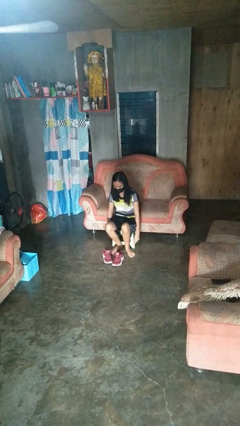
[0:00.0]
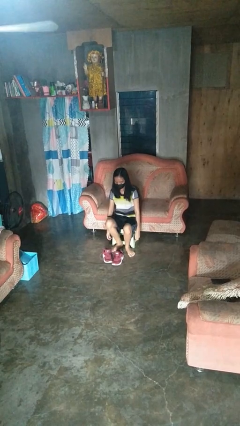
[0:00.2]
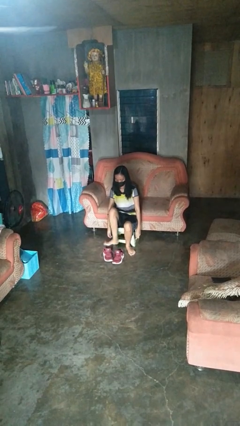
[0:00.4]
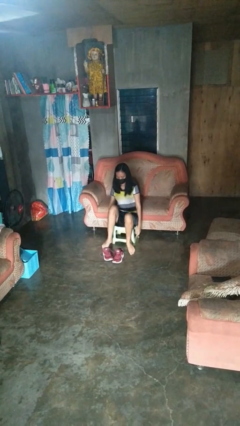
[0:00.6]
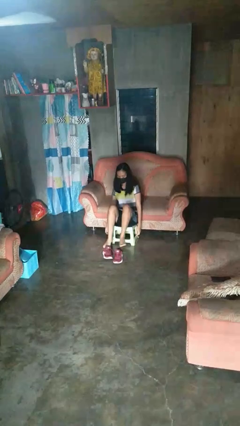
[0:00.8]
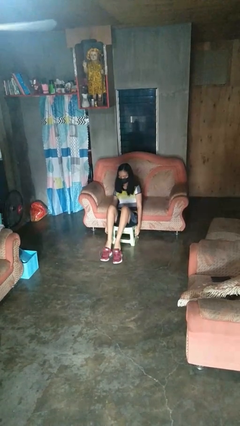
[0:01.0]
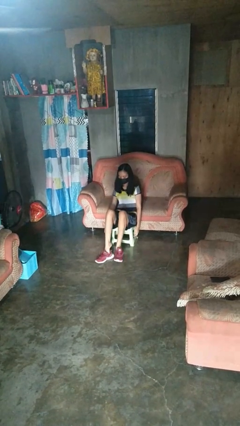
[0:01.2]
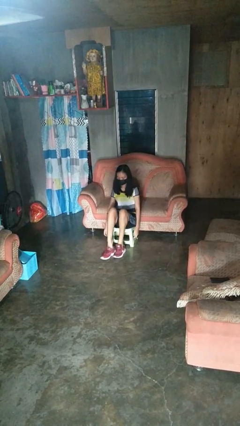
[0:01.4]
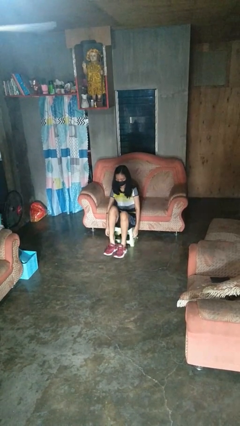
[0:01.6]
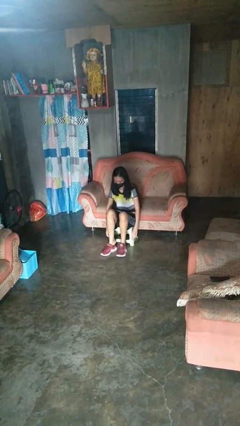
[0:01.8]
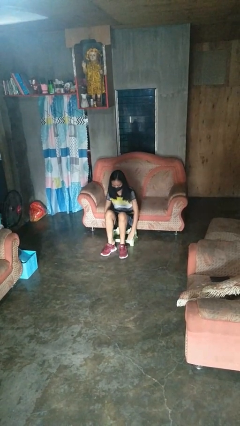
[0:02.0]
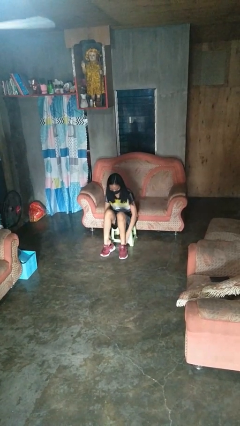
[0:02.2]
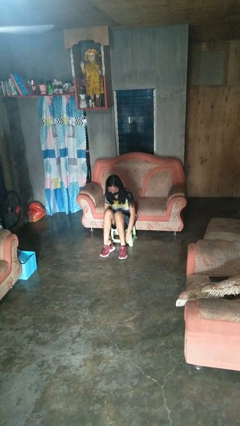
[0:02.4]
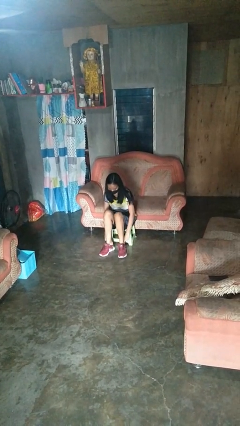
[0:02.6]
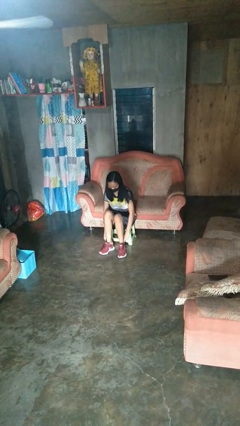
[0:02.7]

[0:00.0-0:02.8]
person puts on shoes

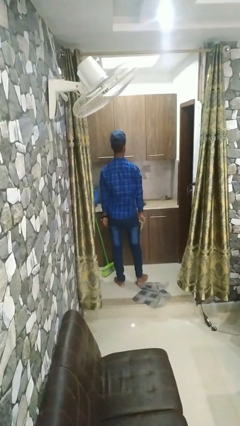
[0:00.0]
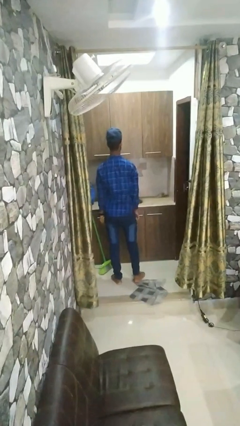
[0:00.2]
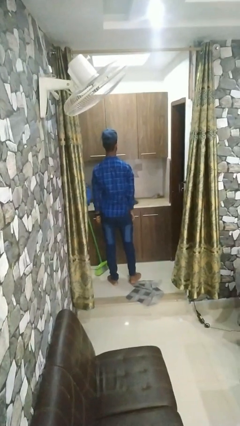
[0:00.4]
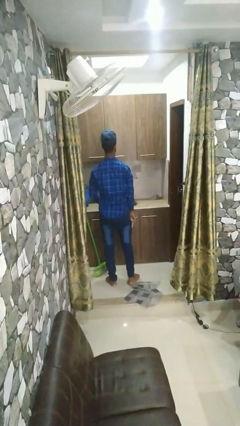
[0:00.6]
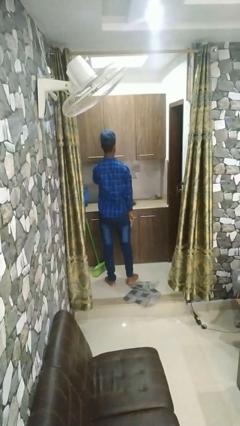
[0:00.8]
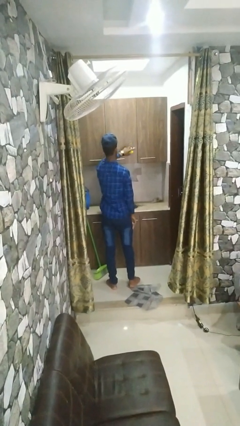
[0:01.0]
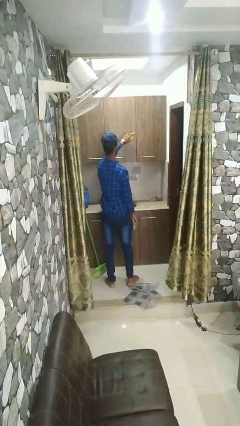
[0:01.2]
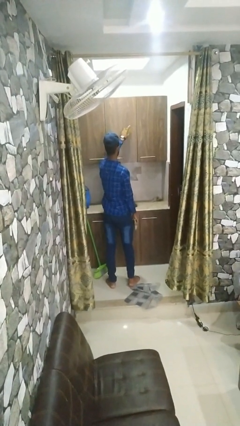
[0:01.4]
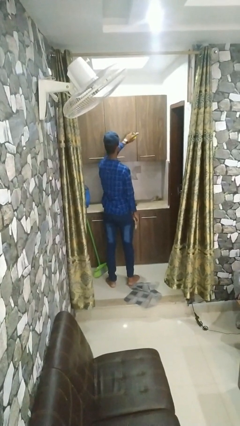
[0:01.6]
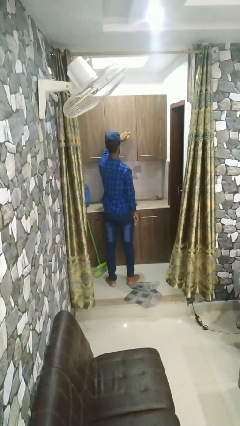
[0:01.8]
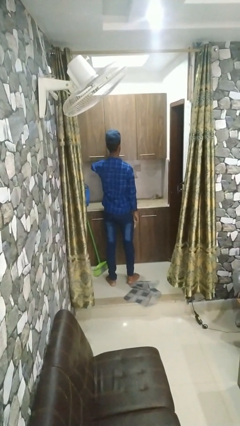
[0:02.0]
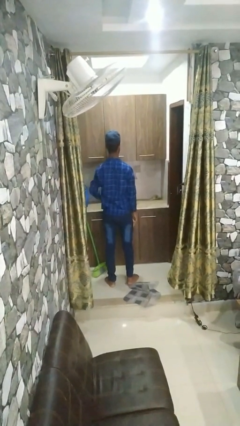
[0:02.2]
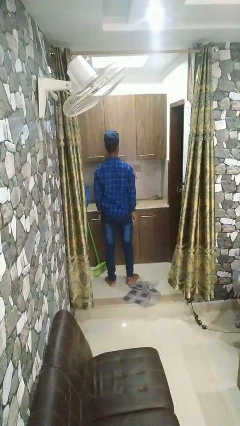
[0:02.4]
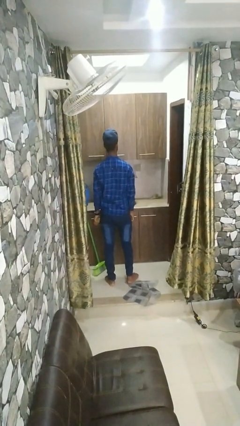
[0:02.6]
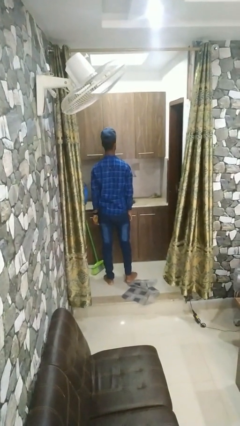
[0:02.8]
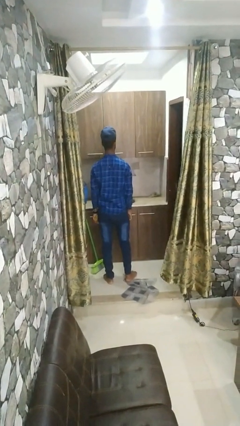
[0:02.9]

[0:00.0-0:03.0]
person sprays from bottle

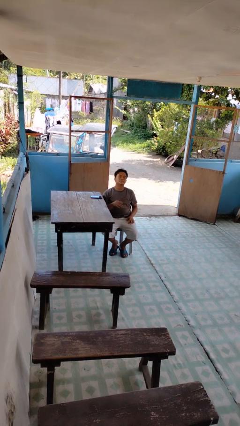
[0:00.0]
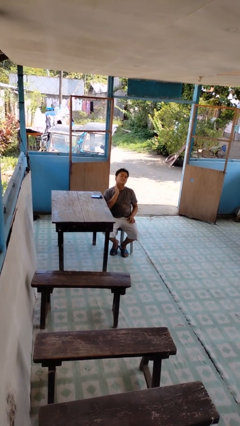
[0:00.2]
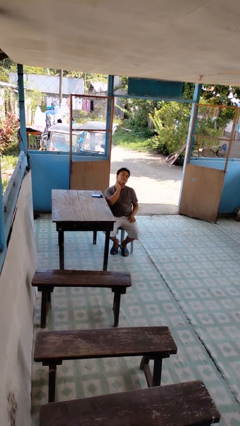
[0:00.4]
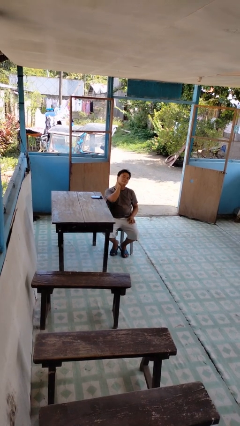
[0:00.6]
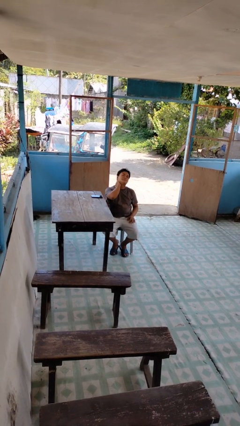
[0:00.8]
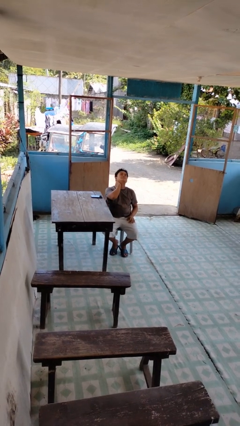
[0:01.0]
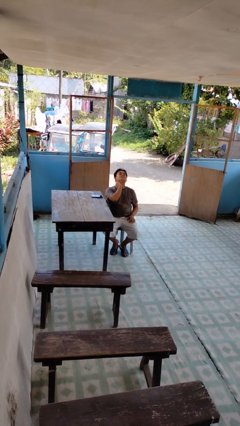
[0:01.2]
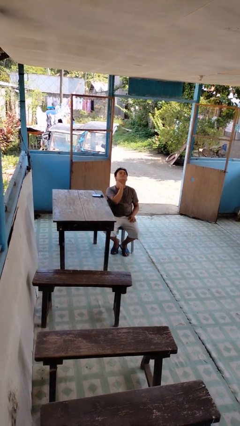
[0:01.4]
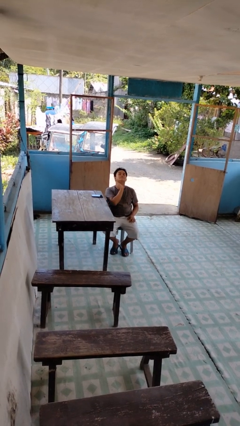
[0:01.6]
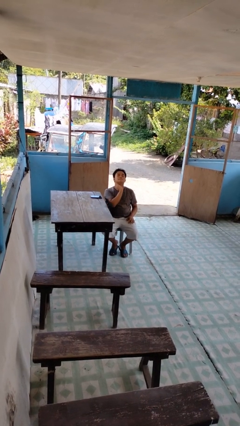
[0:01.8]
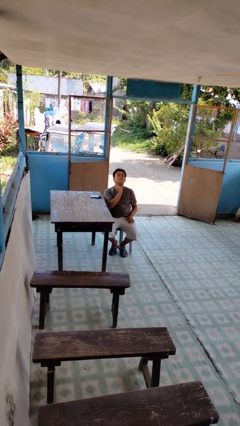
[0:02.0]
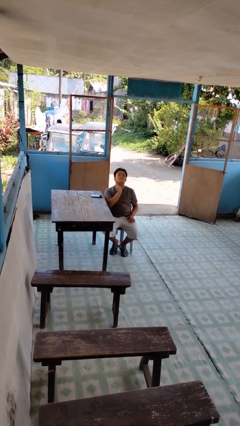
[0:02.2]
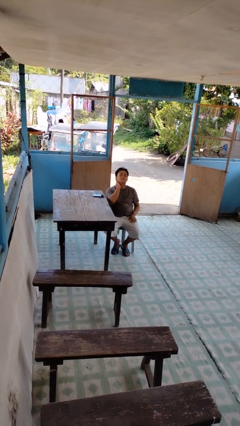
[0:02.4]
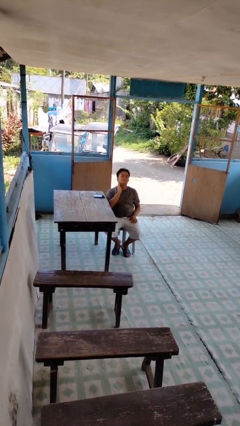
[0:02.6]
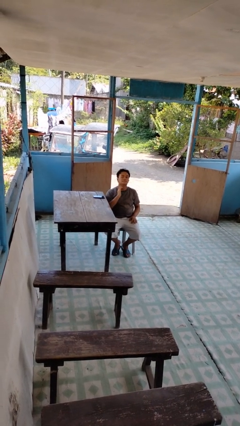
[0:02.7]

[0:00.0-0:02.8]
person rubs neck

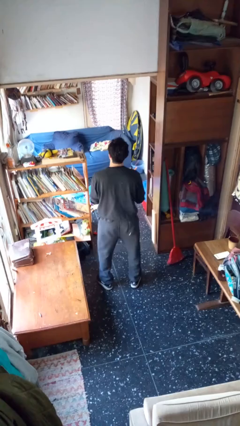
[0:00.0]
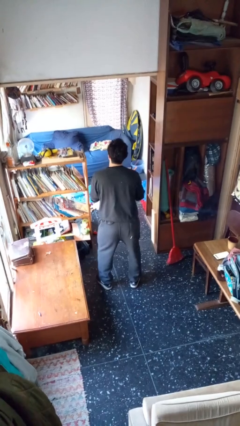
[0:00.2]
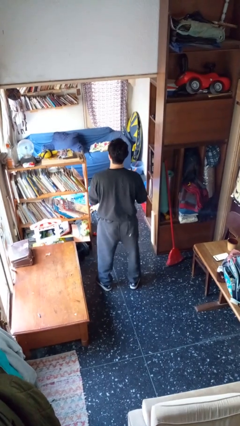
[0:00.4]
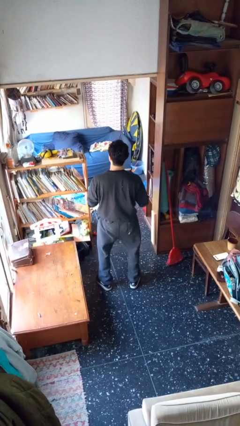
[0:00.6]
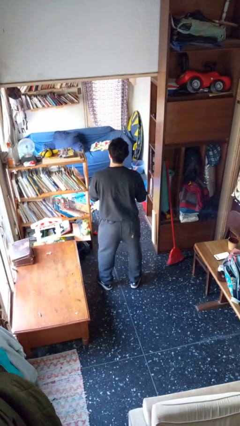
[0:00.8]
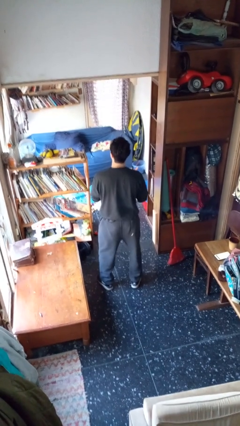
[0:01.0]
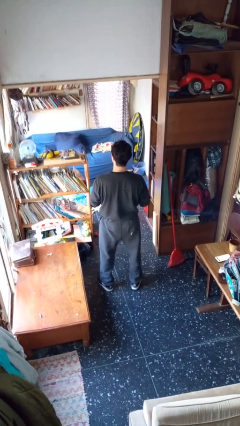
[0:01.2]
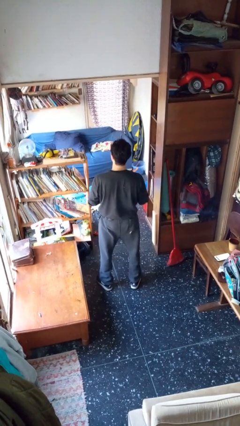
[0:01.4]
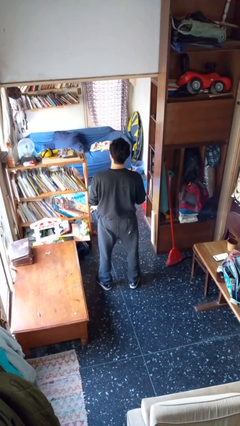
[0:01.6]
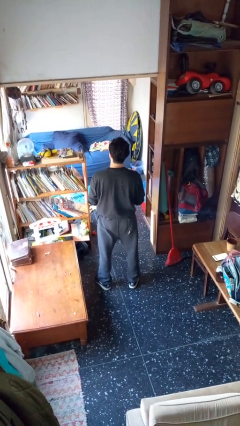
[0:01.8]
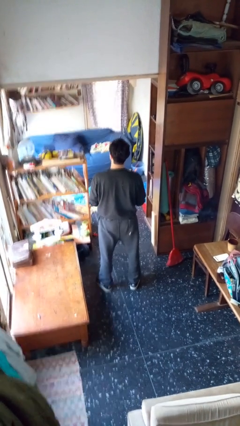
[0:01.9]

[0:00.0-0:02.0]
person wiggles hips

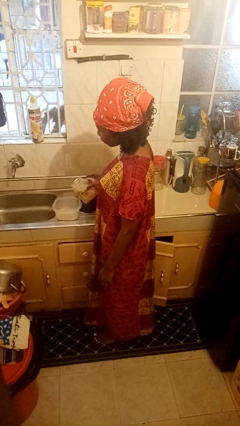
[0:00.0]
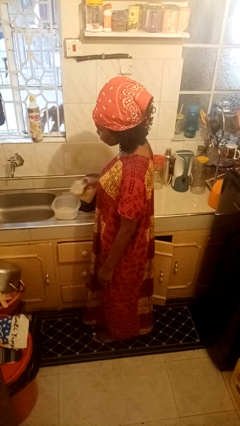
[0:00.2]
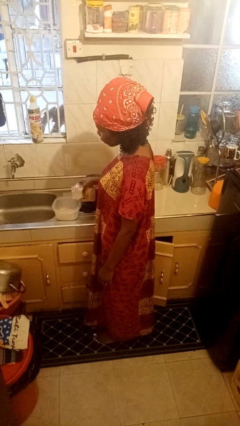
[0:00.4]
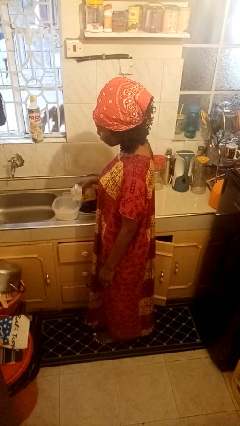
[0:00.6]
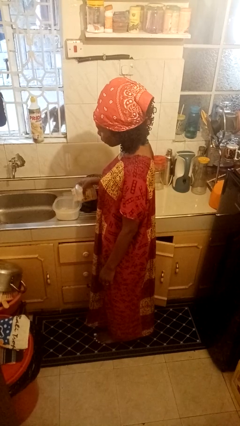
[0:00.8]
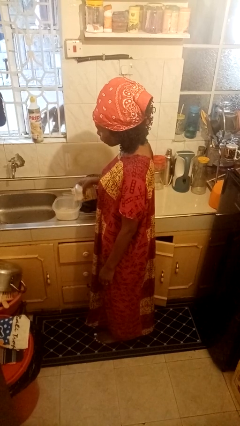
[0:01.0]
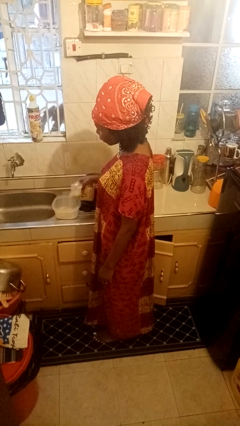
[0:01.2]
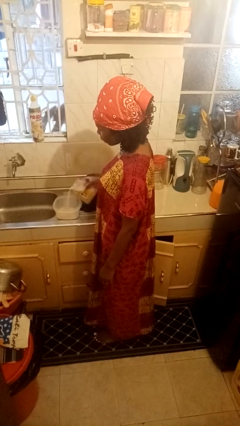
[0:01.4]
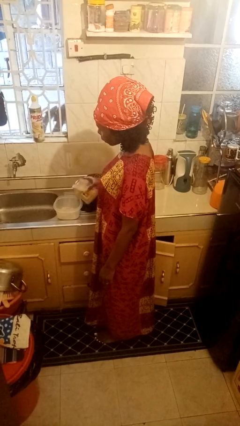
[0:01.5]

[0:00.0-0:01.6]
person pours into bowl

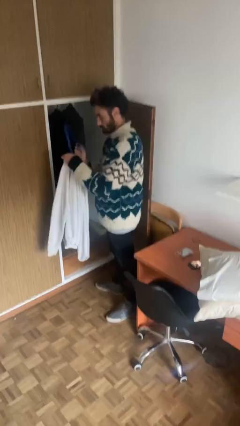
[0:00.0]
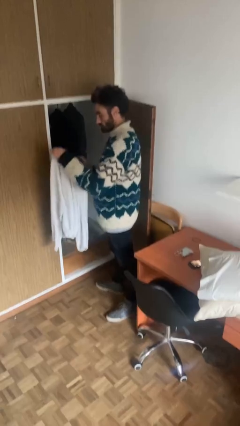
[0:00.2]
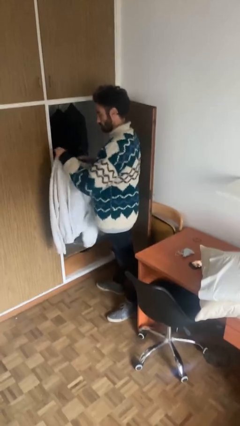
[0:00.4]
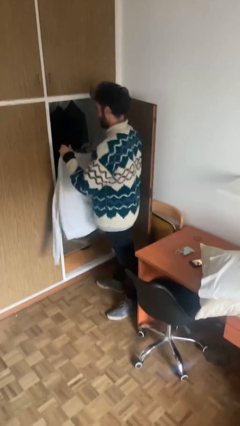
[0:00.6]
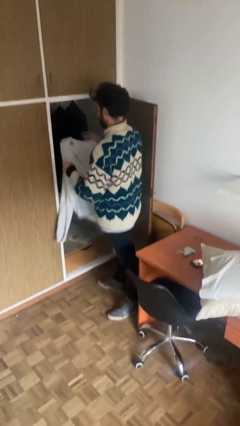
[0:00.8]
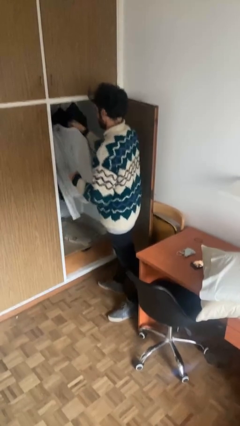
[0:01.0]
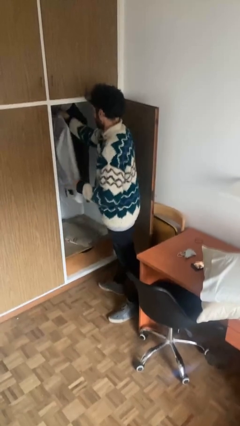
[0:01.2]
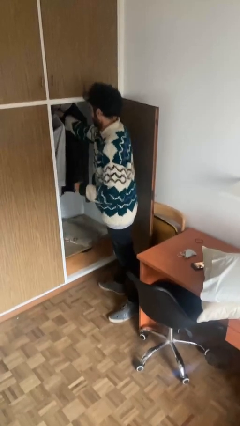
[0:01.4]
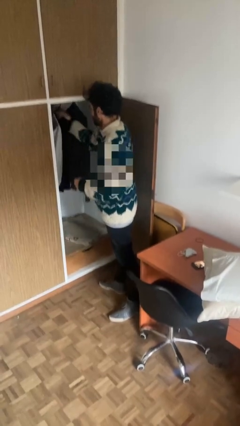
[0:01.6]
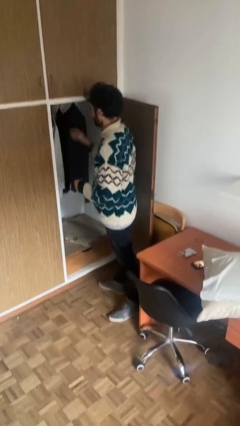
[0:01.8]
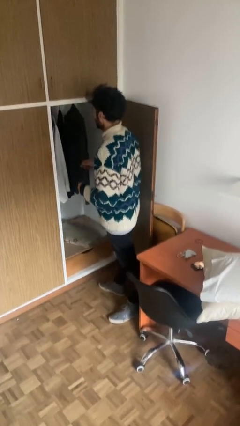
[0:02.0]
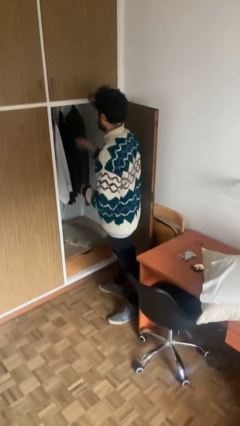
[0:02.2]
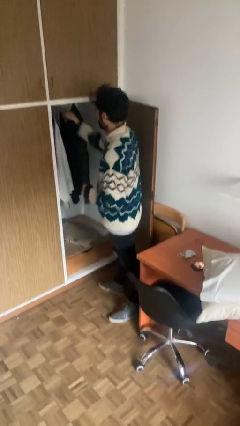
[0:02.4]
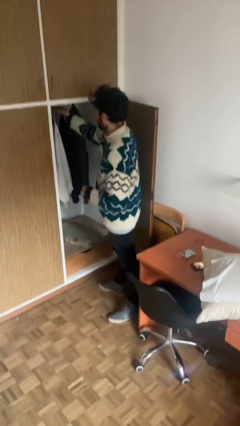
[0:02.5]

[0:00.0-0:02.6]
person puts clothes into closet

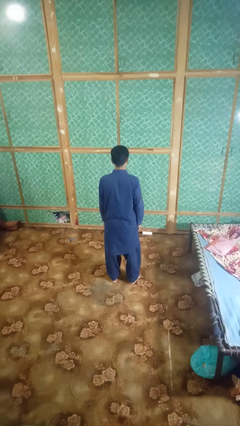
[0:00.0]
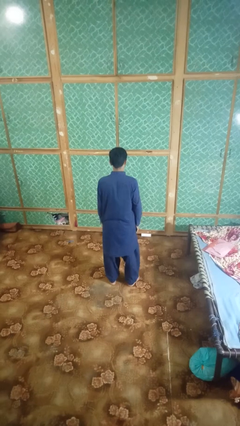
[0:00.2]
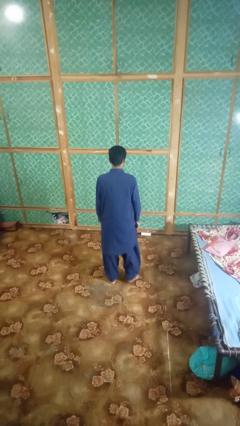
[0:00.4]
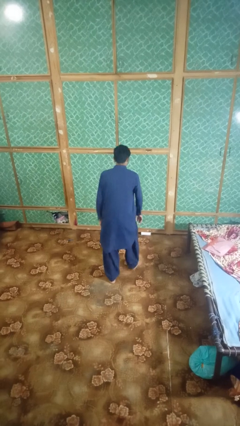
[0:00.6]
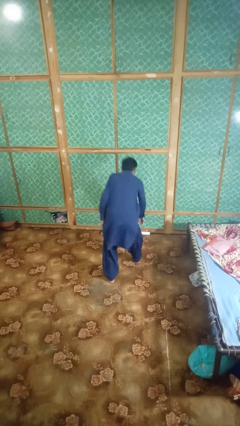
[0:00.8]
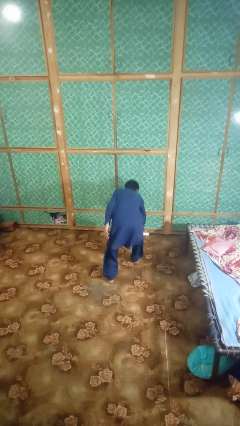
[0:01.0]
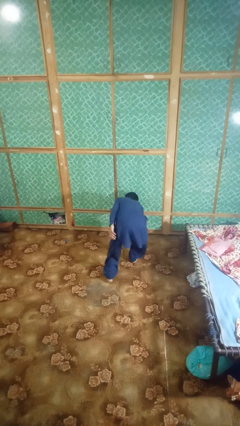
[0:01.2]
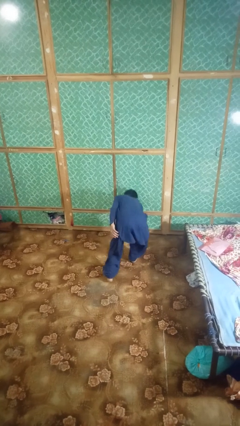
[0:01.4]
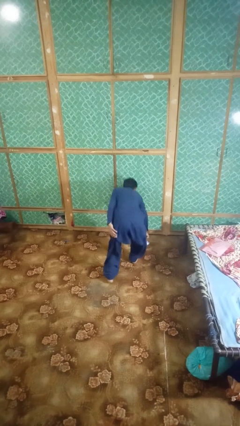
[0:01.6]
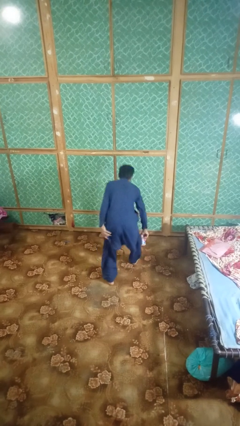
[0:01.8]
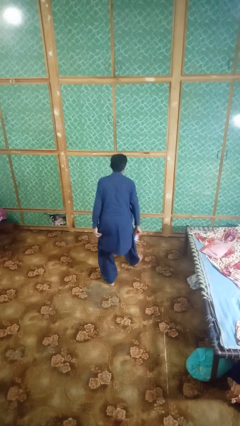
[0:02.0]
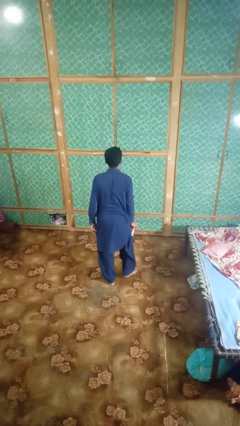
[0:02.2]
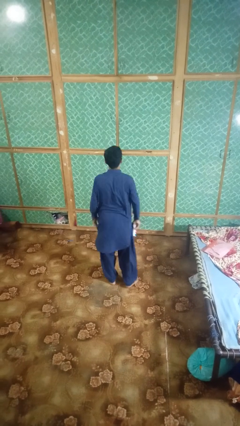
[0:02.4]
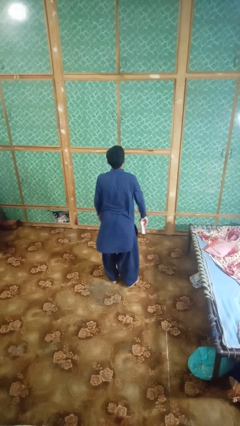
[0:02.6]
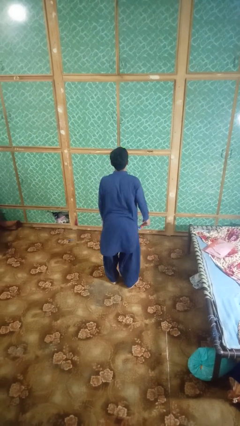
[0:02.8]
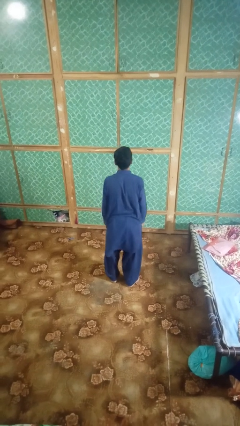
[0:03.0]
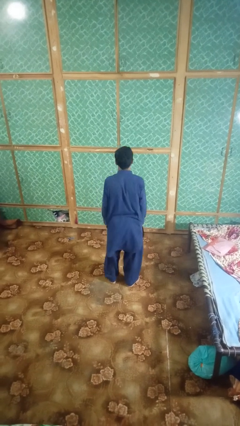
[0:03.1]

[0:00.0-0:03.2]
person picks up object from floor
